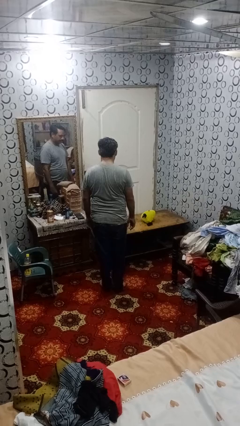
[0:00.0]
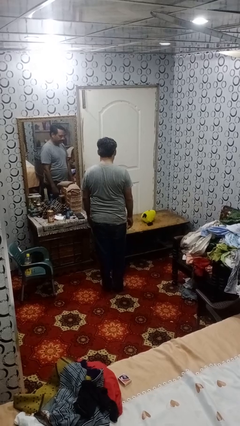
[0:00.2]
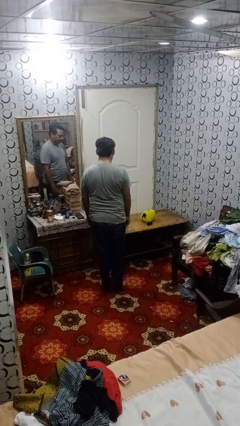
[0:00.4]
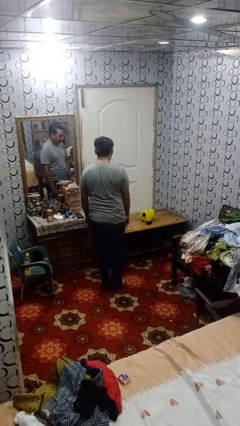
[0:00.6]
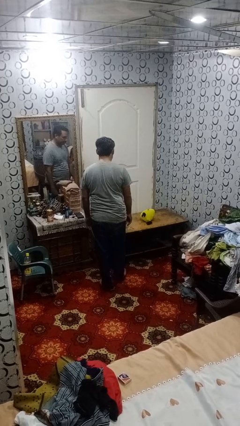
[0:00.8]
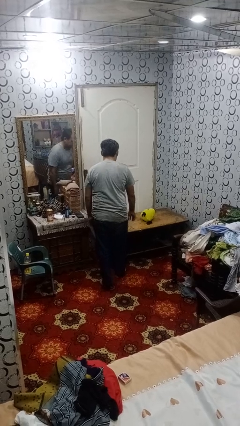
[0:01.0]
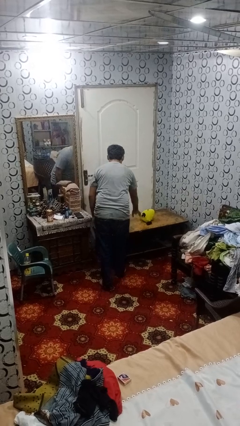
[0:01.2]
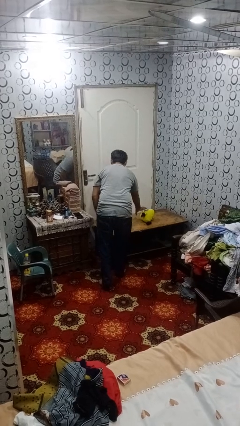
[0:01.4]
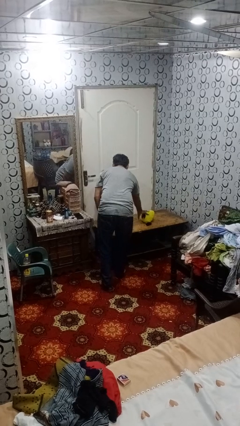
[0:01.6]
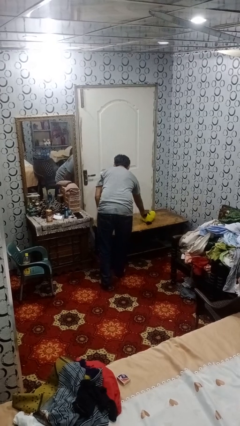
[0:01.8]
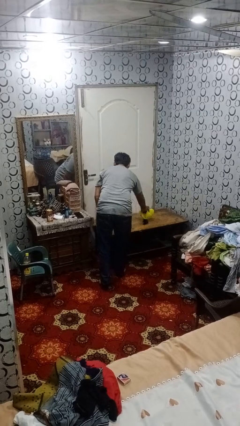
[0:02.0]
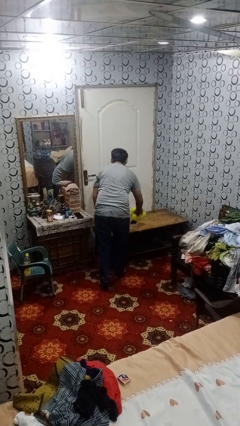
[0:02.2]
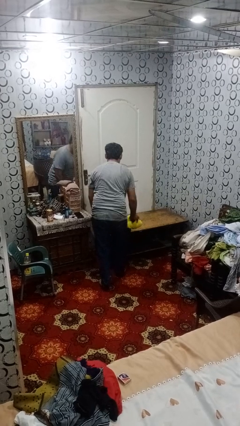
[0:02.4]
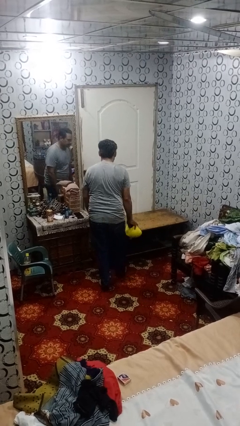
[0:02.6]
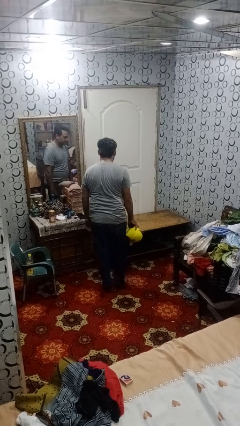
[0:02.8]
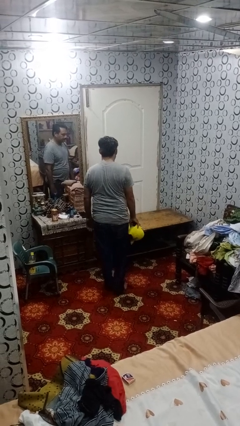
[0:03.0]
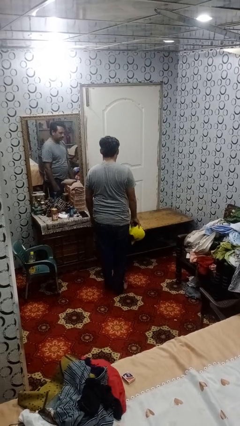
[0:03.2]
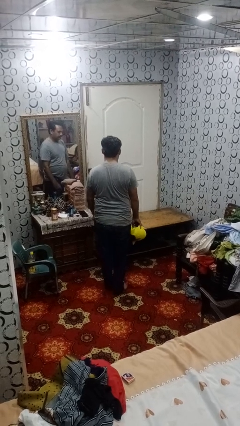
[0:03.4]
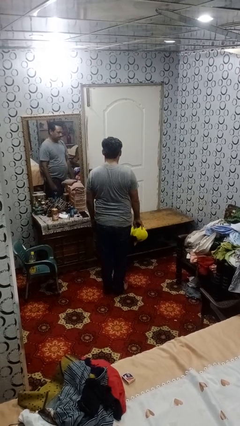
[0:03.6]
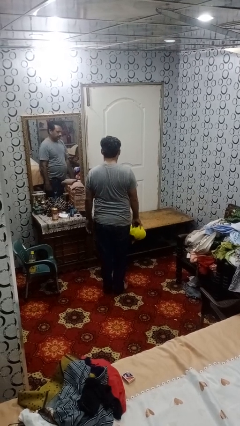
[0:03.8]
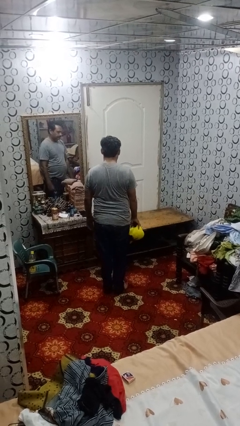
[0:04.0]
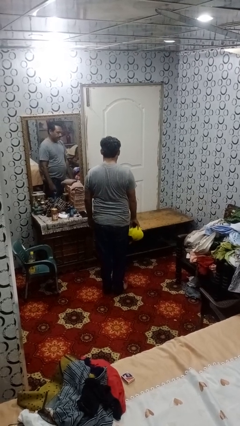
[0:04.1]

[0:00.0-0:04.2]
person picks up object from table

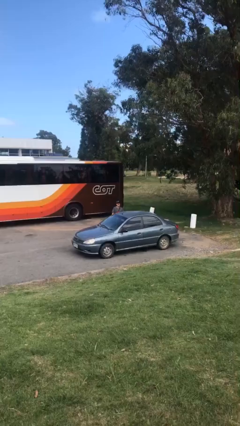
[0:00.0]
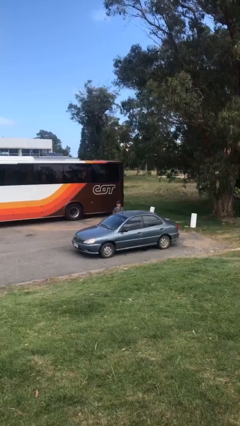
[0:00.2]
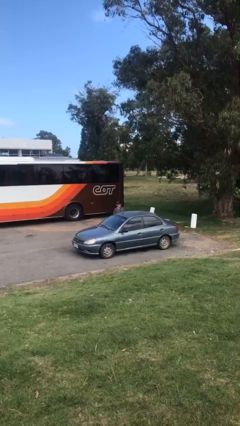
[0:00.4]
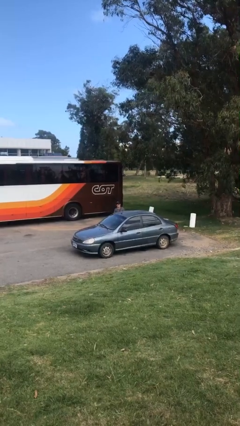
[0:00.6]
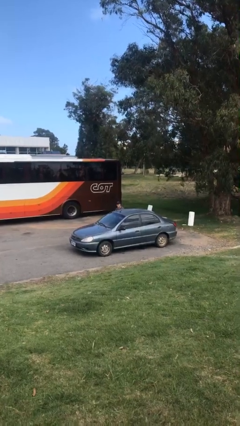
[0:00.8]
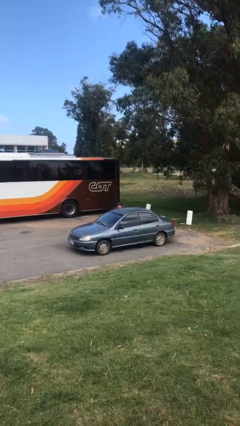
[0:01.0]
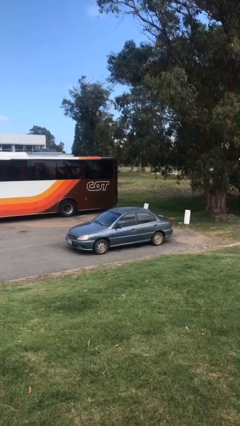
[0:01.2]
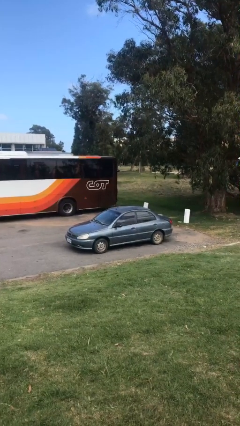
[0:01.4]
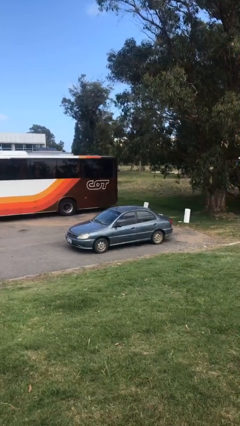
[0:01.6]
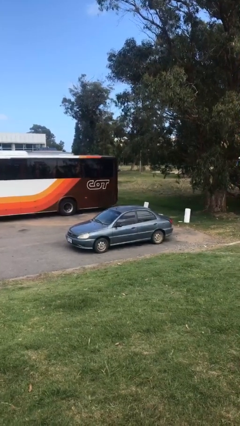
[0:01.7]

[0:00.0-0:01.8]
person enters car

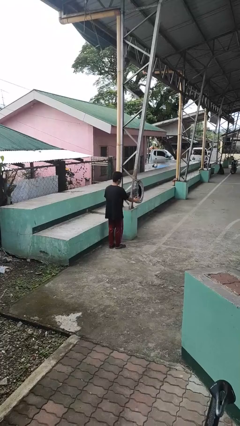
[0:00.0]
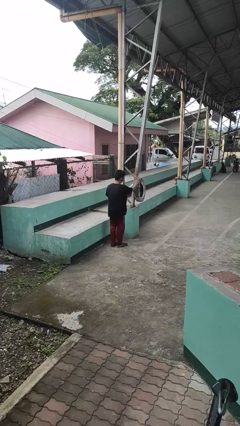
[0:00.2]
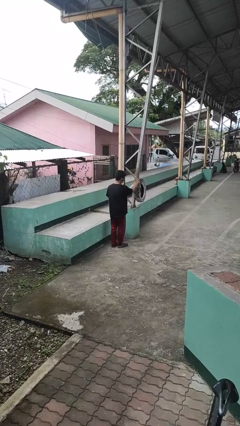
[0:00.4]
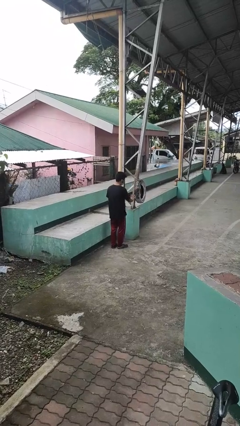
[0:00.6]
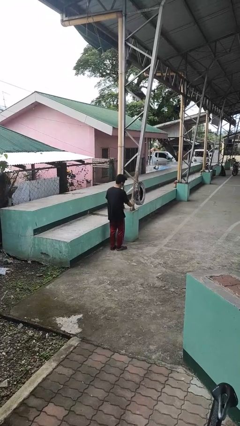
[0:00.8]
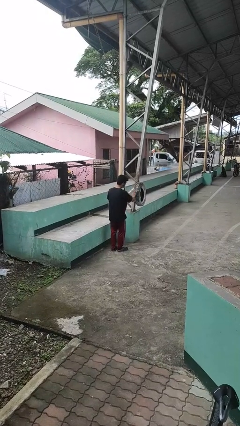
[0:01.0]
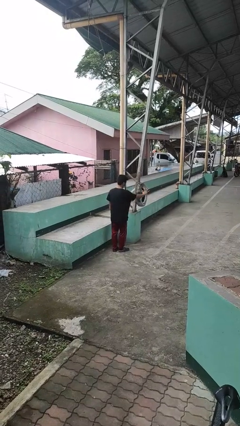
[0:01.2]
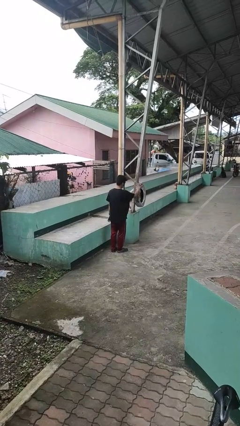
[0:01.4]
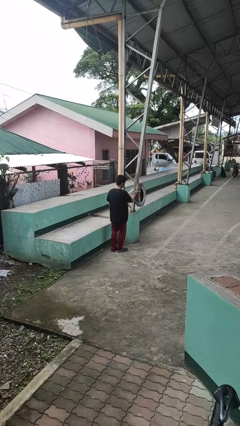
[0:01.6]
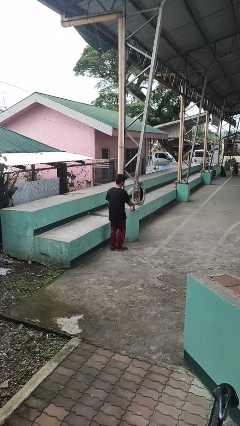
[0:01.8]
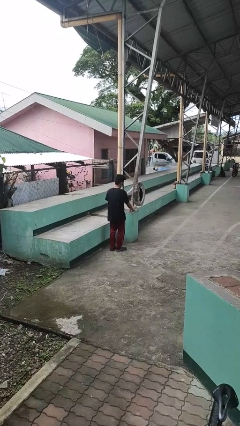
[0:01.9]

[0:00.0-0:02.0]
person waves hand over object

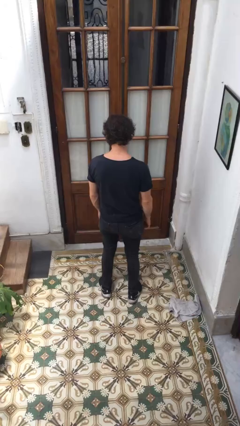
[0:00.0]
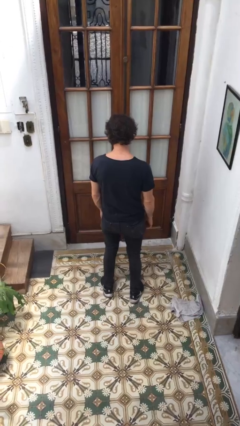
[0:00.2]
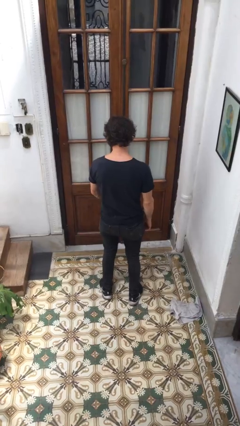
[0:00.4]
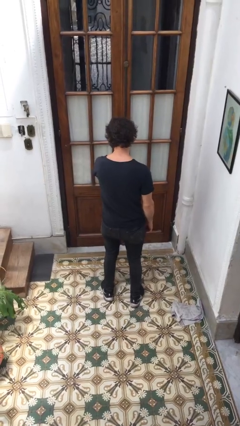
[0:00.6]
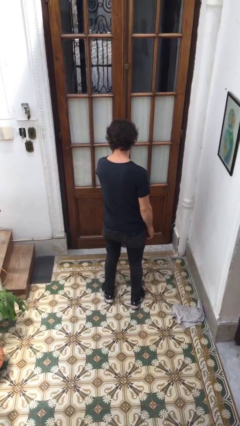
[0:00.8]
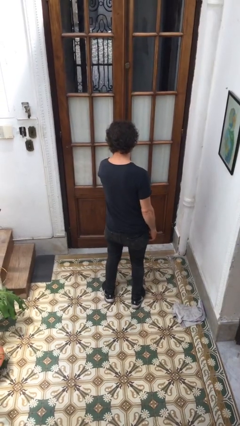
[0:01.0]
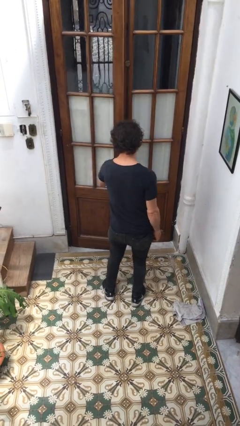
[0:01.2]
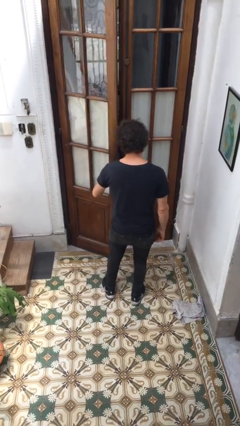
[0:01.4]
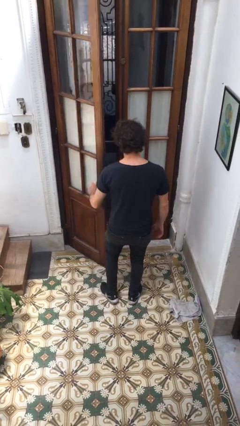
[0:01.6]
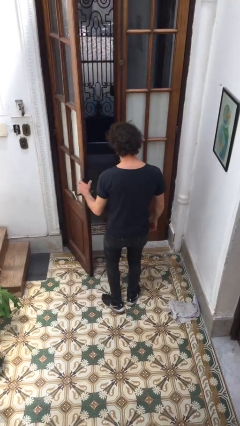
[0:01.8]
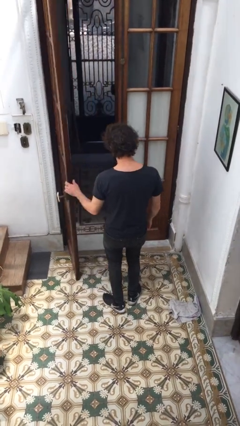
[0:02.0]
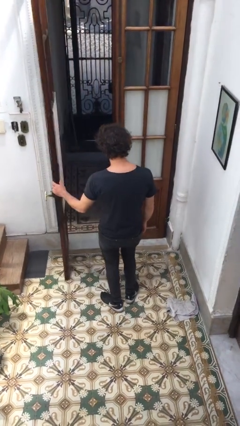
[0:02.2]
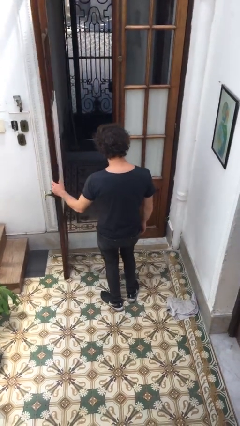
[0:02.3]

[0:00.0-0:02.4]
person opens facility door

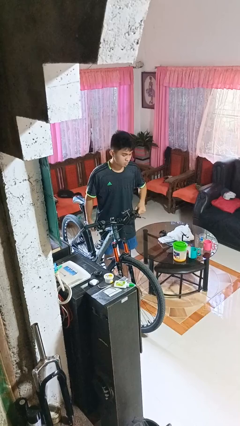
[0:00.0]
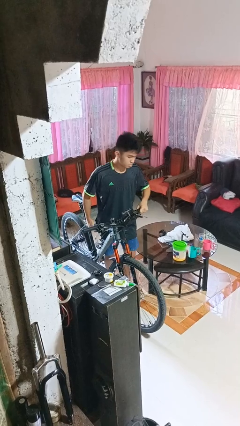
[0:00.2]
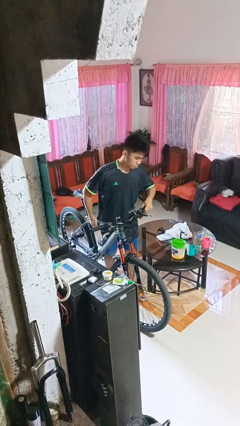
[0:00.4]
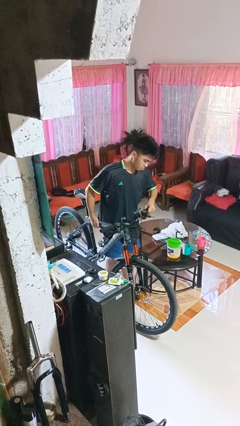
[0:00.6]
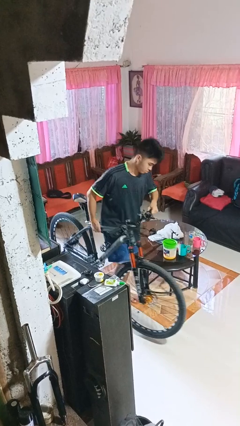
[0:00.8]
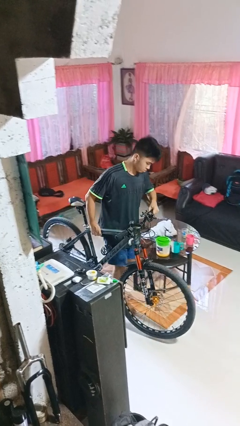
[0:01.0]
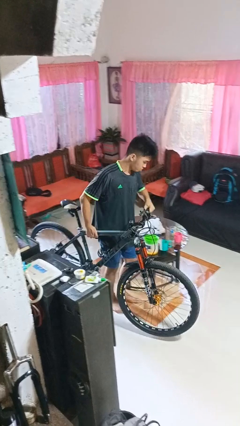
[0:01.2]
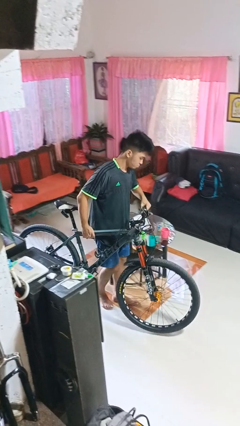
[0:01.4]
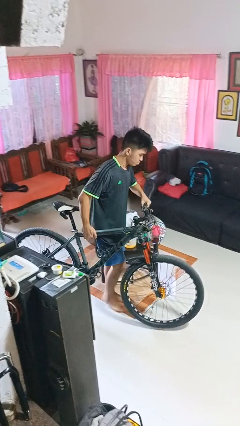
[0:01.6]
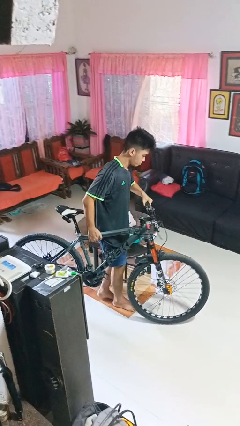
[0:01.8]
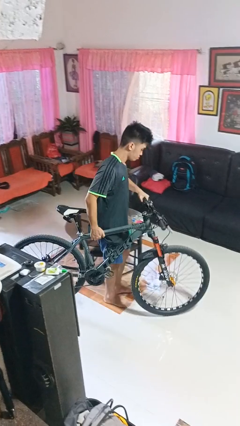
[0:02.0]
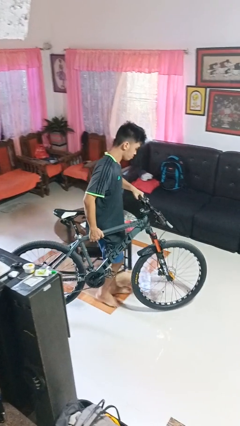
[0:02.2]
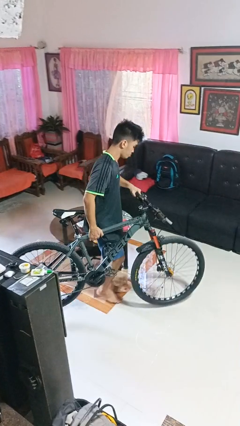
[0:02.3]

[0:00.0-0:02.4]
person carries bicycle

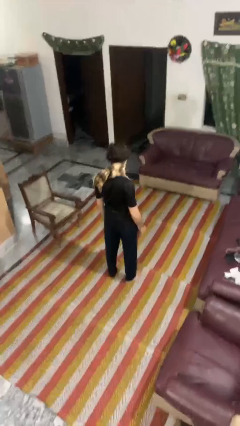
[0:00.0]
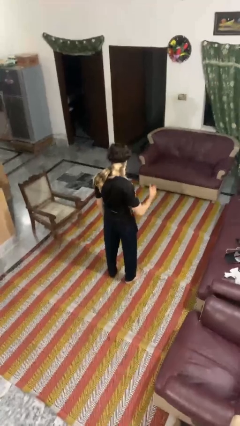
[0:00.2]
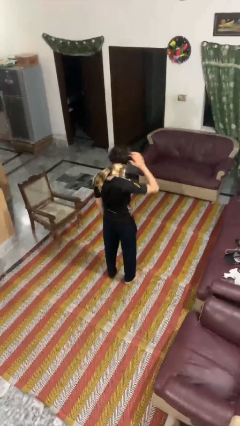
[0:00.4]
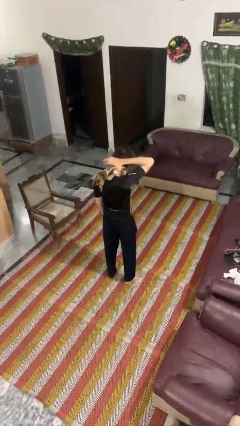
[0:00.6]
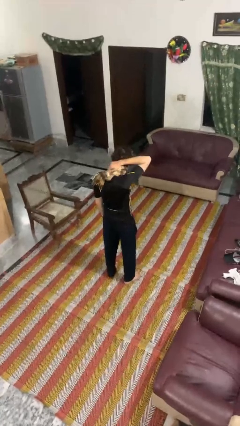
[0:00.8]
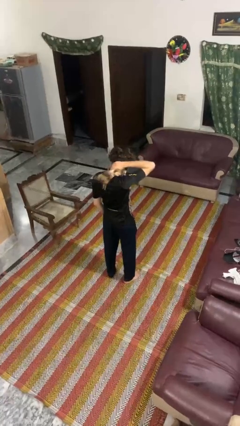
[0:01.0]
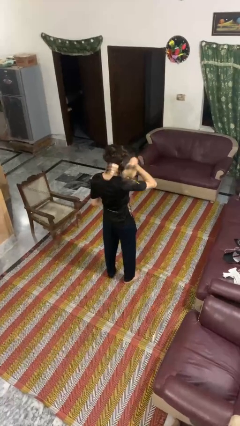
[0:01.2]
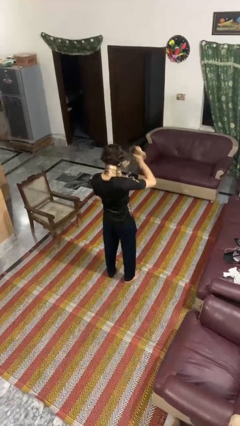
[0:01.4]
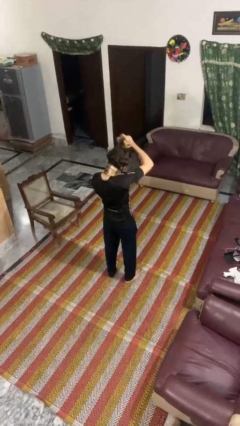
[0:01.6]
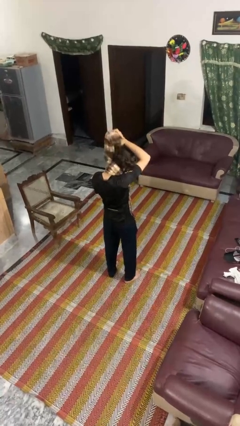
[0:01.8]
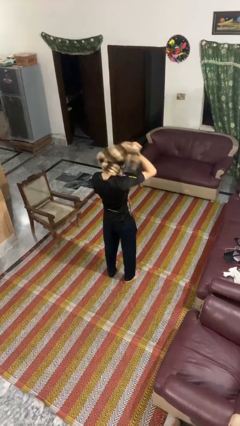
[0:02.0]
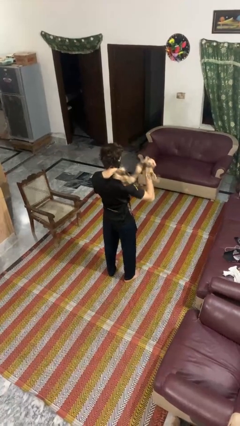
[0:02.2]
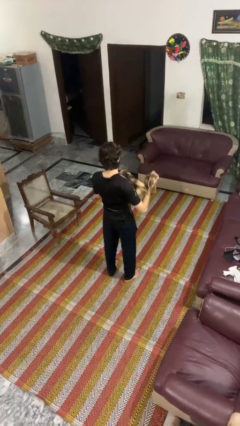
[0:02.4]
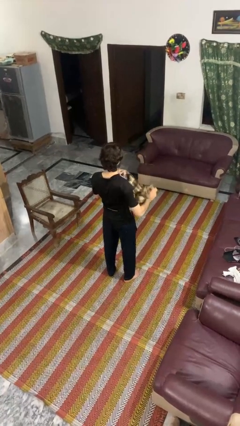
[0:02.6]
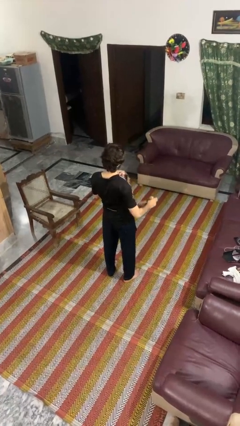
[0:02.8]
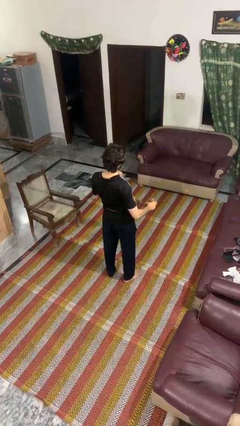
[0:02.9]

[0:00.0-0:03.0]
person takes off scarf

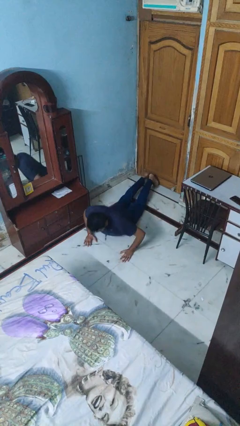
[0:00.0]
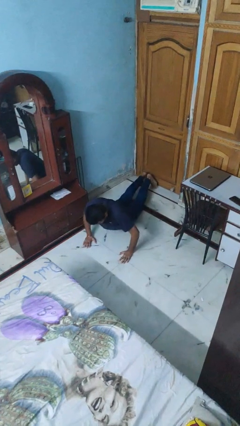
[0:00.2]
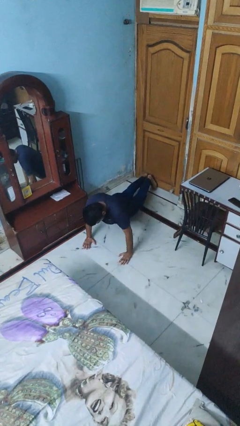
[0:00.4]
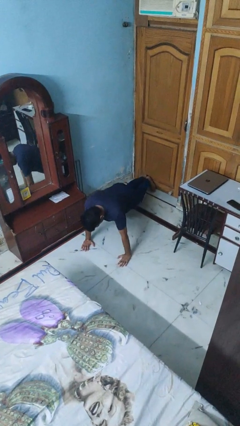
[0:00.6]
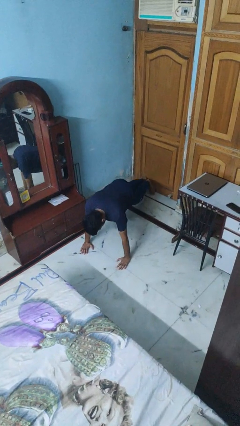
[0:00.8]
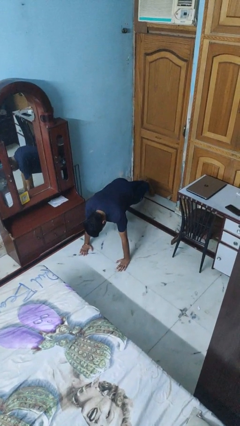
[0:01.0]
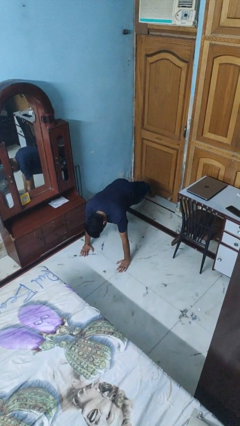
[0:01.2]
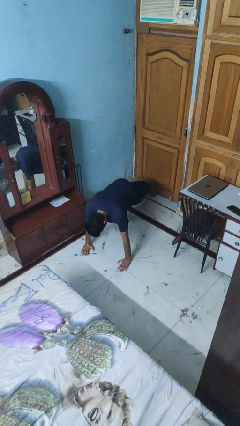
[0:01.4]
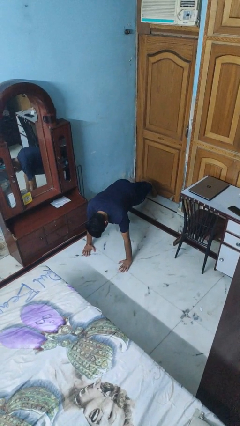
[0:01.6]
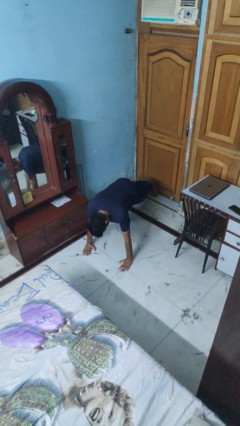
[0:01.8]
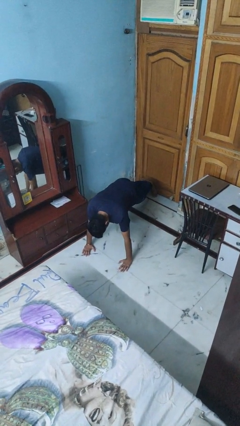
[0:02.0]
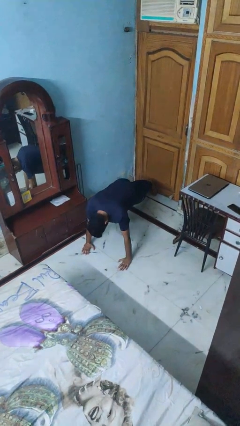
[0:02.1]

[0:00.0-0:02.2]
person exercises with pushup
